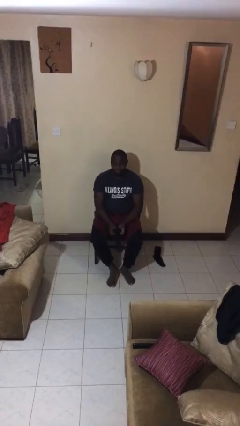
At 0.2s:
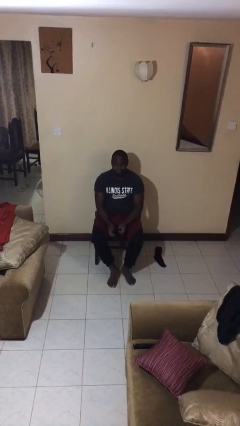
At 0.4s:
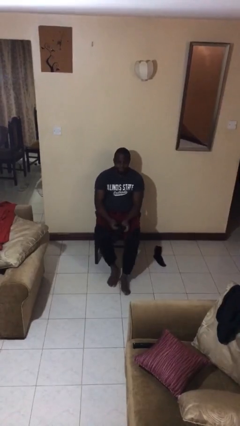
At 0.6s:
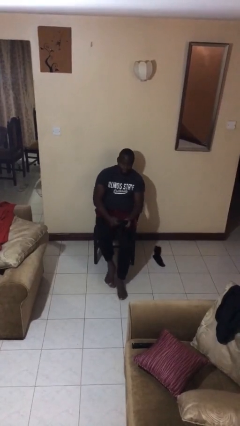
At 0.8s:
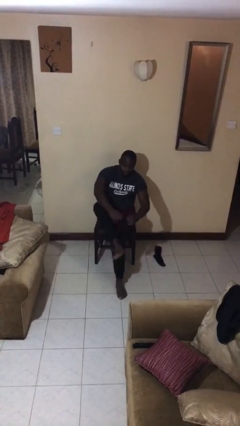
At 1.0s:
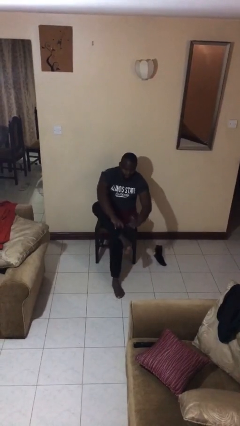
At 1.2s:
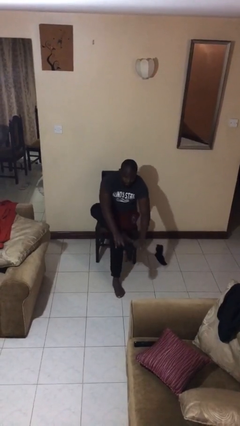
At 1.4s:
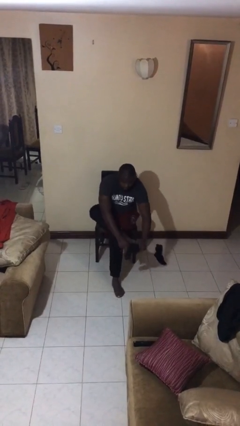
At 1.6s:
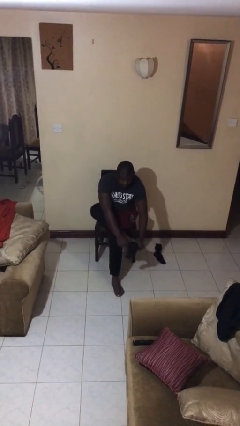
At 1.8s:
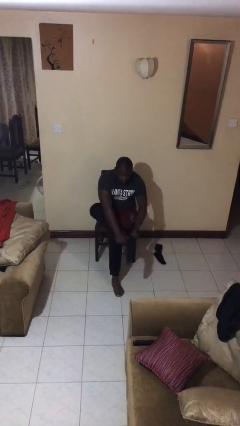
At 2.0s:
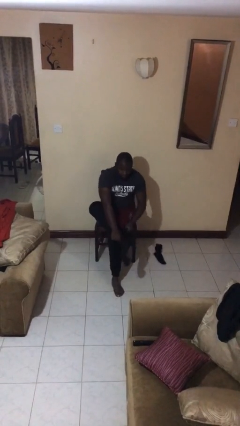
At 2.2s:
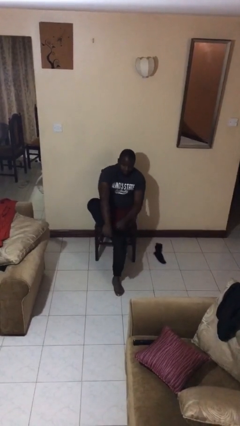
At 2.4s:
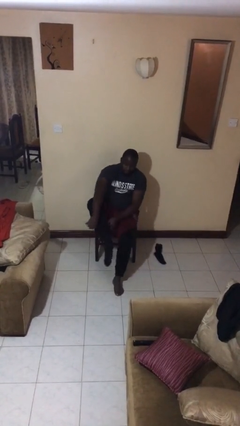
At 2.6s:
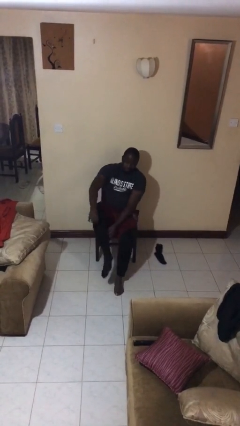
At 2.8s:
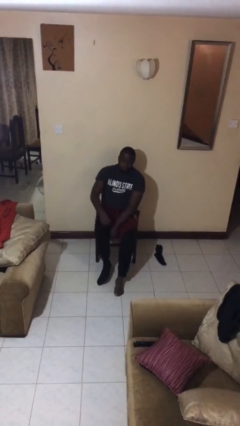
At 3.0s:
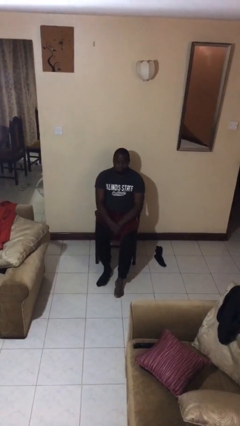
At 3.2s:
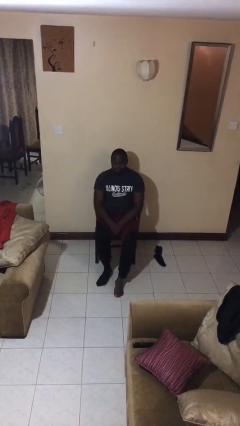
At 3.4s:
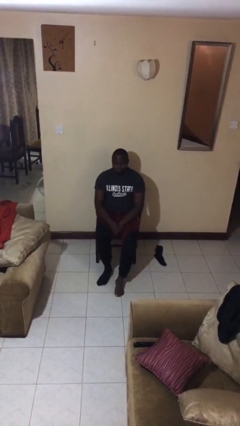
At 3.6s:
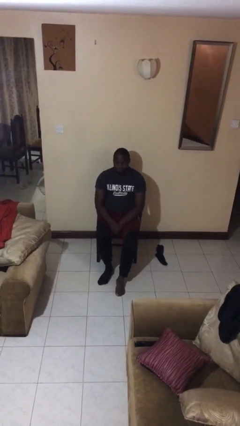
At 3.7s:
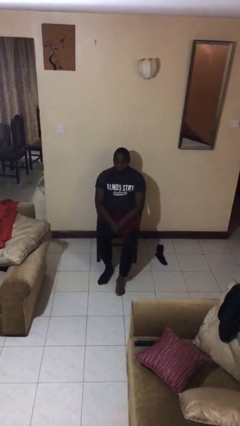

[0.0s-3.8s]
person puts on socks

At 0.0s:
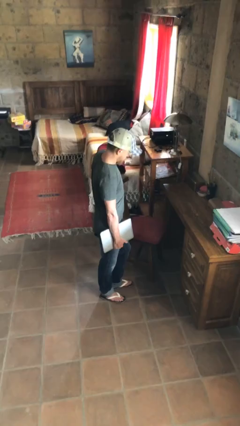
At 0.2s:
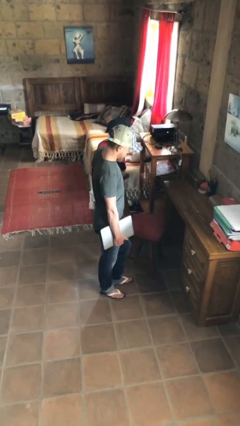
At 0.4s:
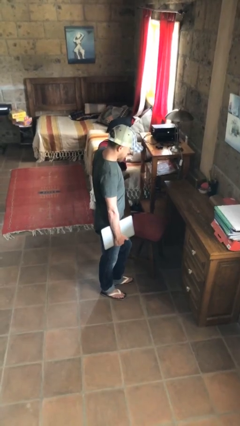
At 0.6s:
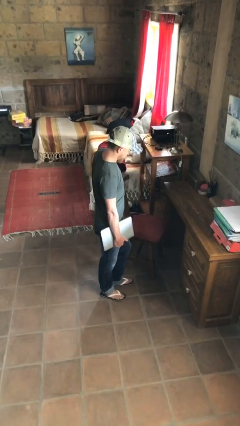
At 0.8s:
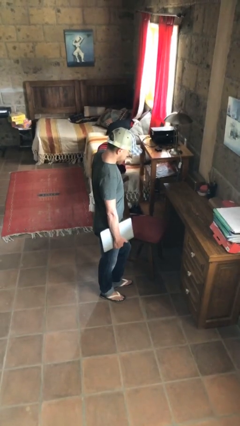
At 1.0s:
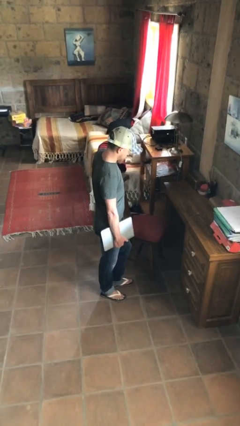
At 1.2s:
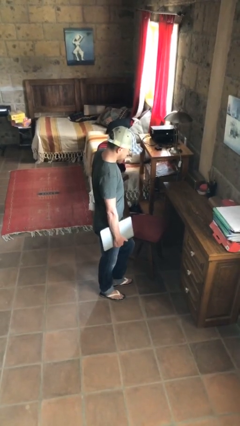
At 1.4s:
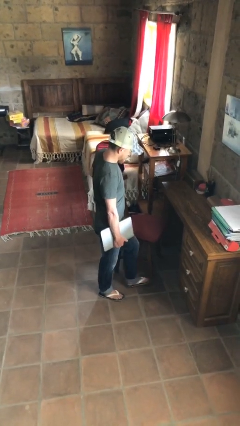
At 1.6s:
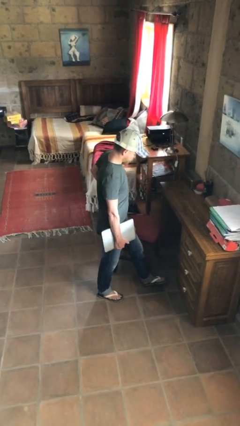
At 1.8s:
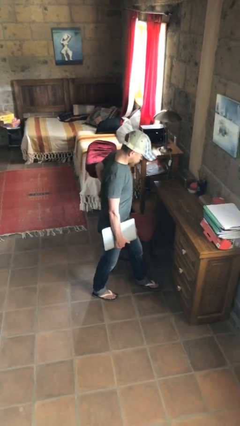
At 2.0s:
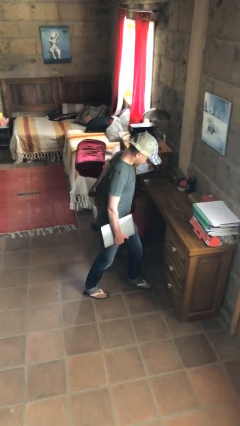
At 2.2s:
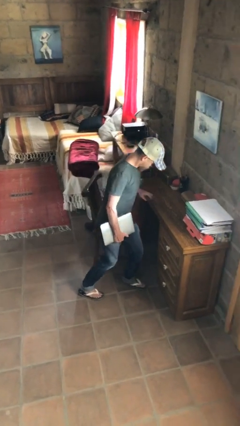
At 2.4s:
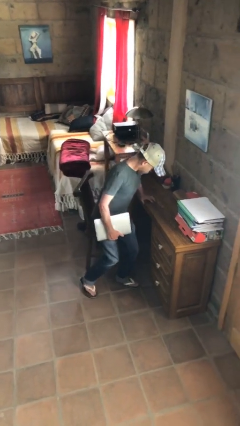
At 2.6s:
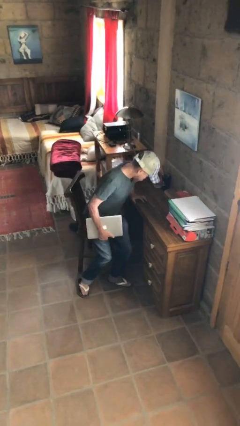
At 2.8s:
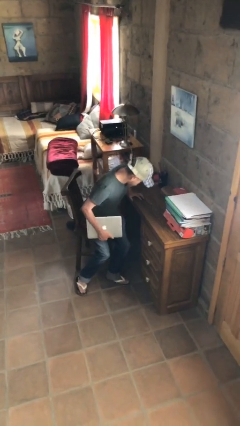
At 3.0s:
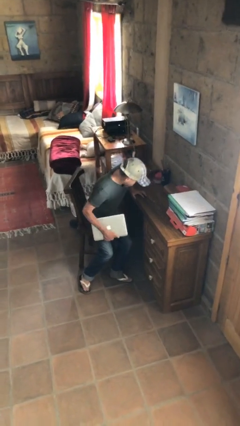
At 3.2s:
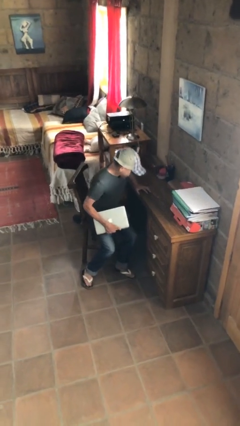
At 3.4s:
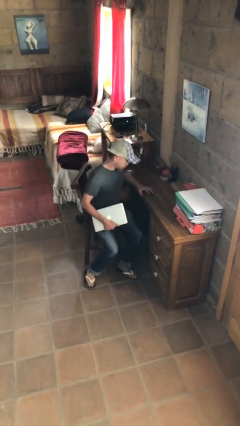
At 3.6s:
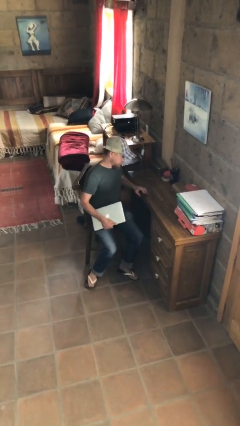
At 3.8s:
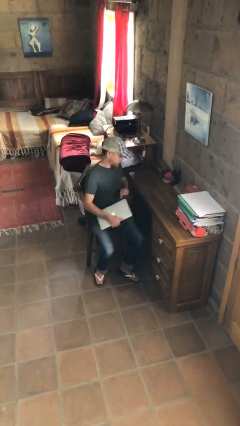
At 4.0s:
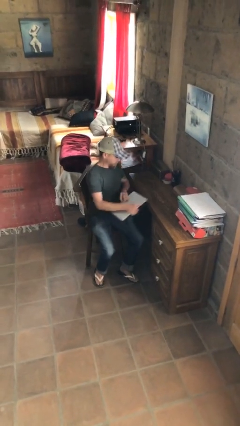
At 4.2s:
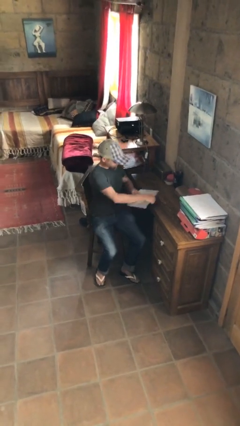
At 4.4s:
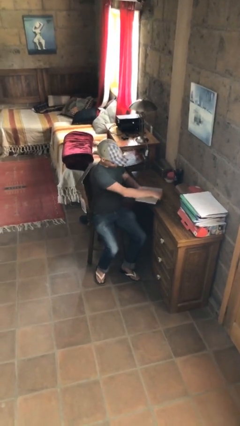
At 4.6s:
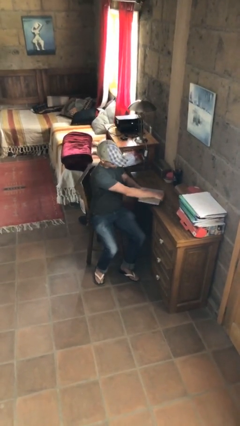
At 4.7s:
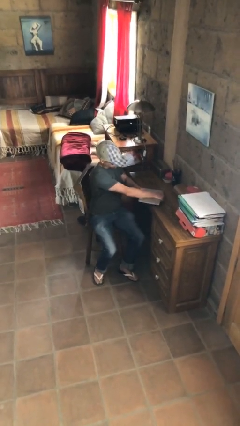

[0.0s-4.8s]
person sits down

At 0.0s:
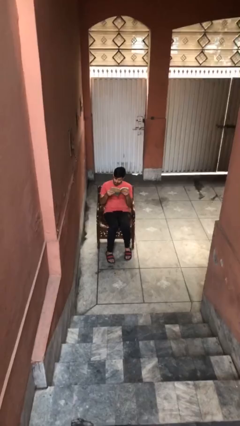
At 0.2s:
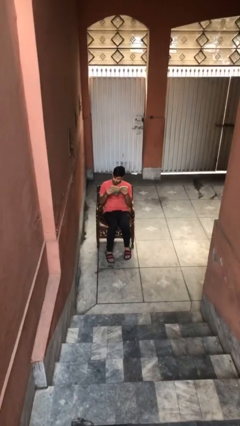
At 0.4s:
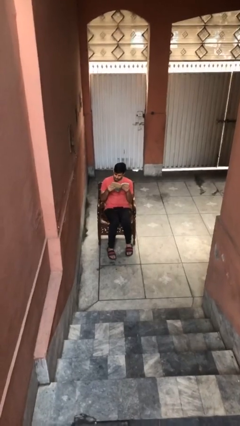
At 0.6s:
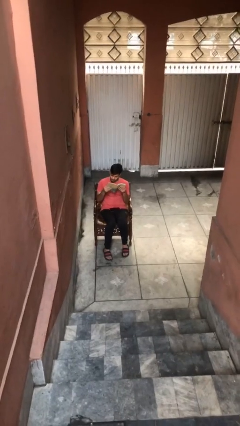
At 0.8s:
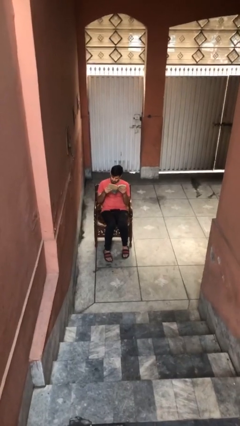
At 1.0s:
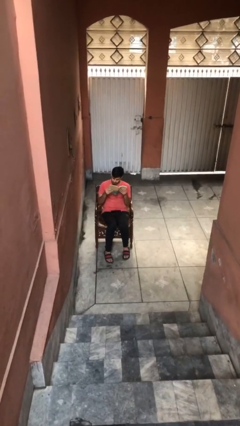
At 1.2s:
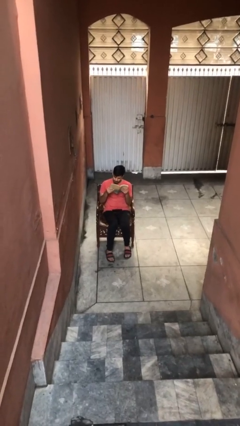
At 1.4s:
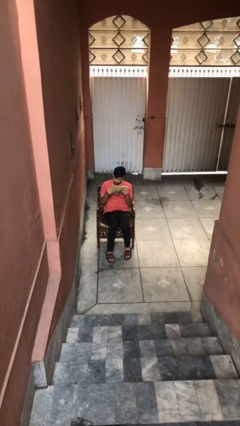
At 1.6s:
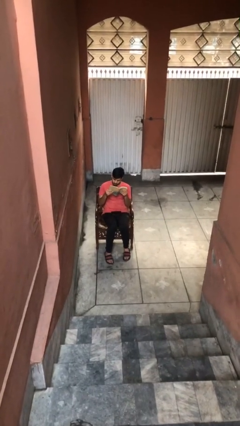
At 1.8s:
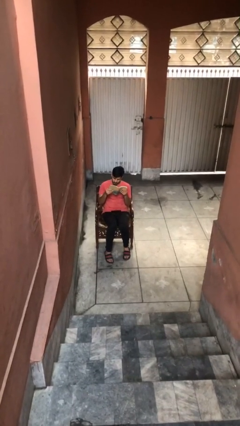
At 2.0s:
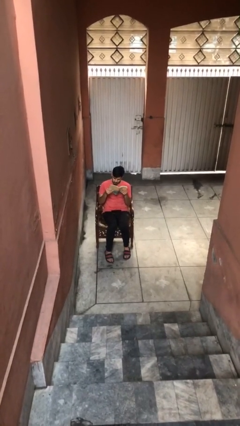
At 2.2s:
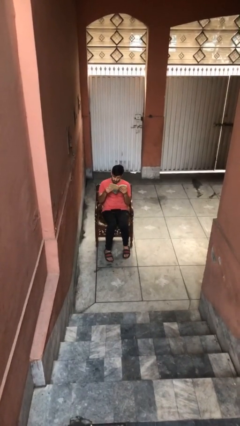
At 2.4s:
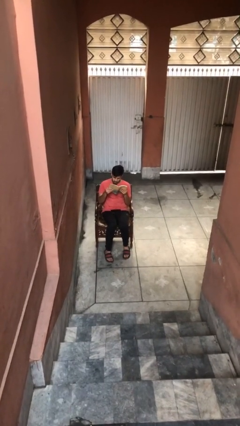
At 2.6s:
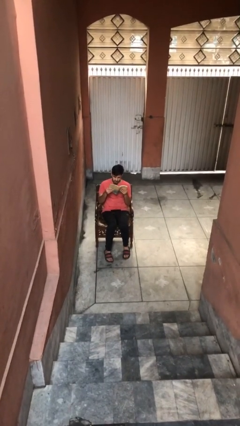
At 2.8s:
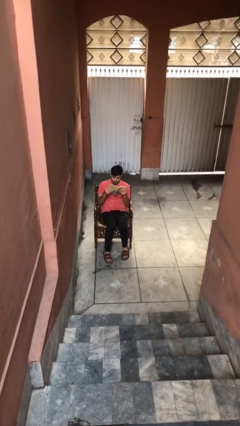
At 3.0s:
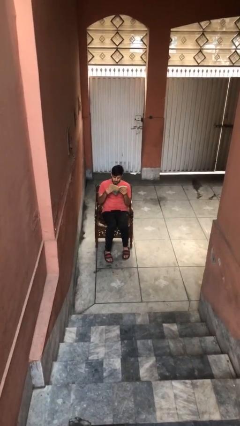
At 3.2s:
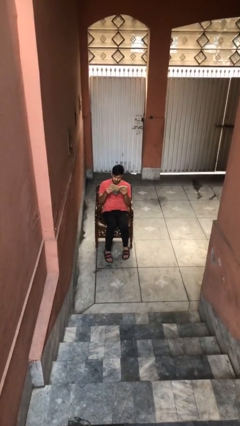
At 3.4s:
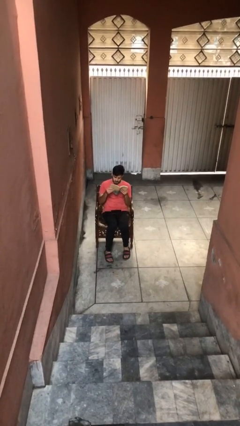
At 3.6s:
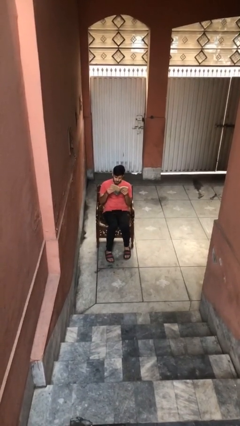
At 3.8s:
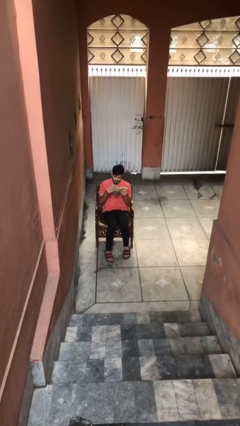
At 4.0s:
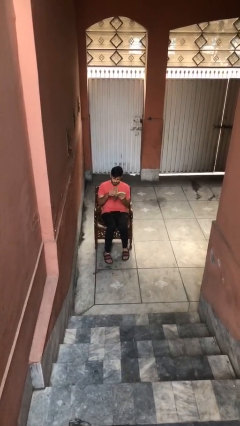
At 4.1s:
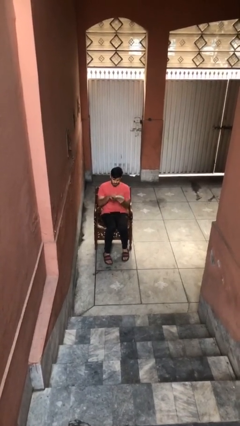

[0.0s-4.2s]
person reads document

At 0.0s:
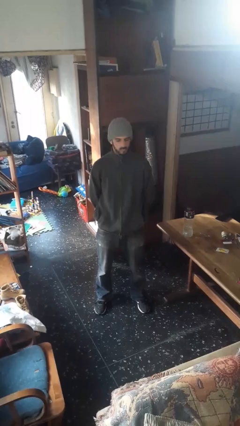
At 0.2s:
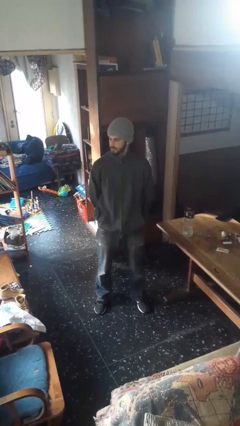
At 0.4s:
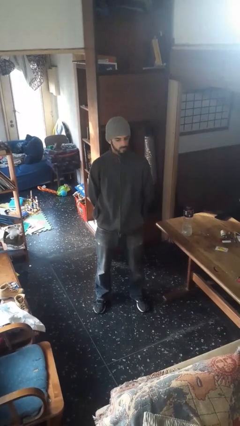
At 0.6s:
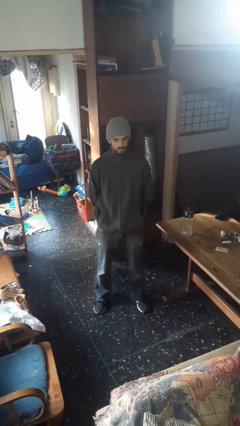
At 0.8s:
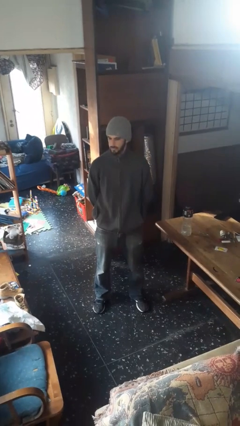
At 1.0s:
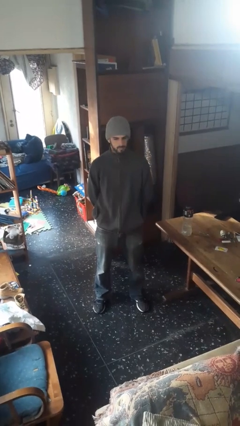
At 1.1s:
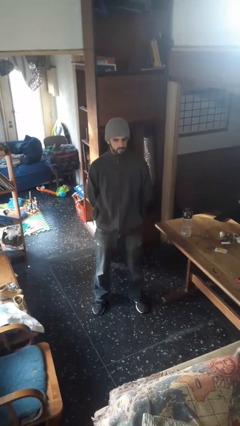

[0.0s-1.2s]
person shakes head

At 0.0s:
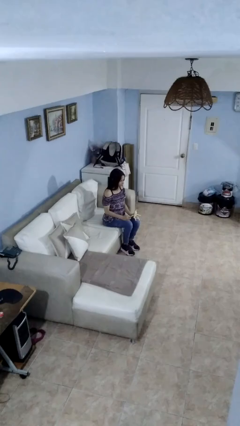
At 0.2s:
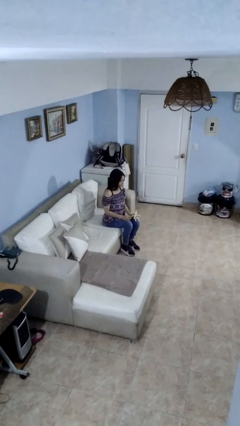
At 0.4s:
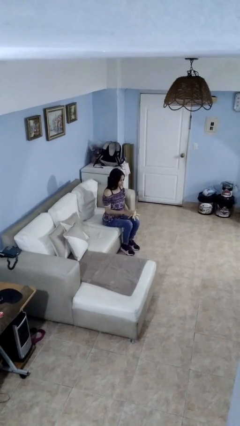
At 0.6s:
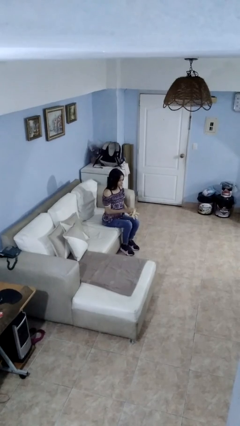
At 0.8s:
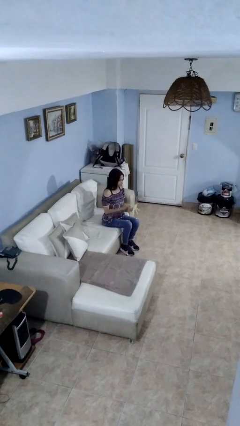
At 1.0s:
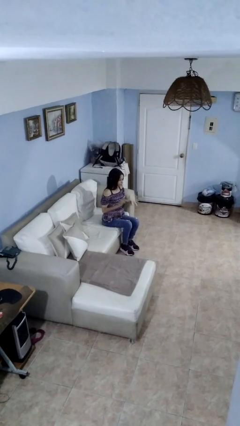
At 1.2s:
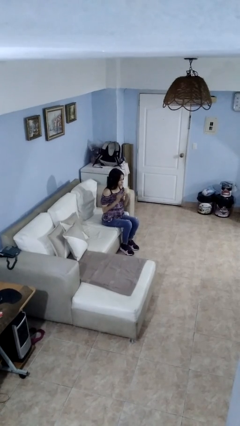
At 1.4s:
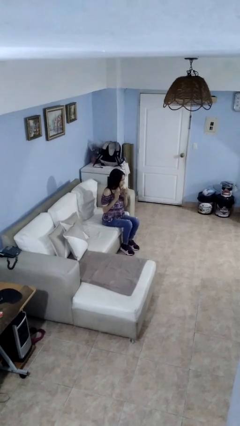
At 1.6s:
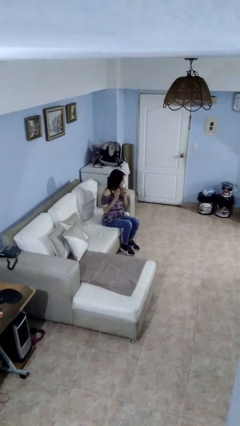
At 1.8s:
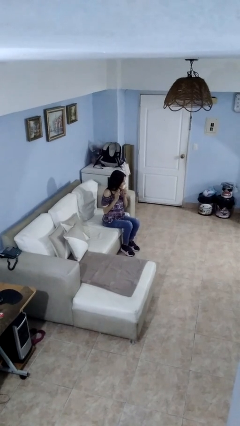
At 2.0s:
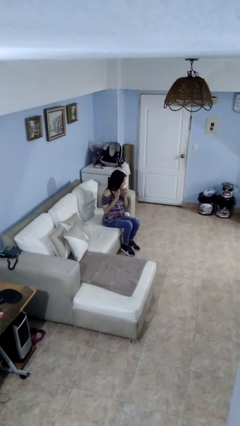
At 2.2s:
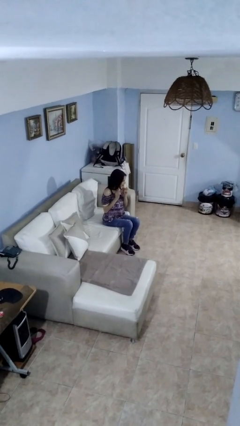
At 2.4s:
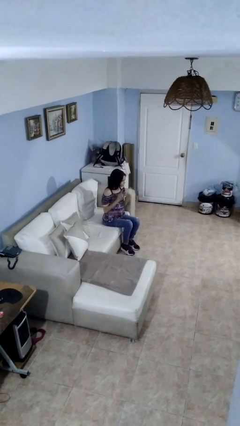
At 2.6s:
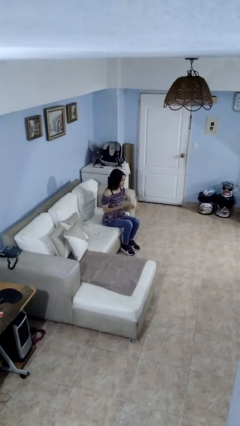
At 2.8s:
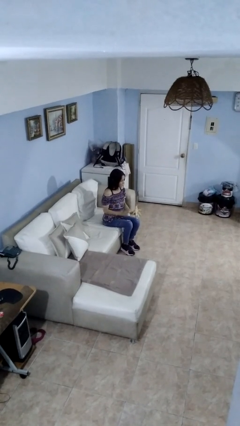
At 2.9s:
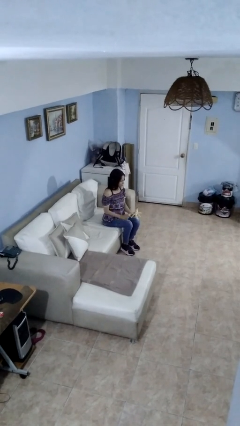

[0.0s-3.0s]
person eats banana

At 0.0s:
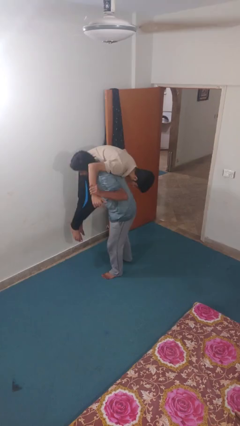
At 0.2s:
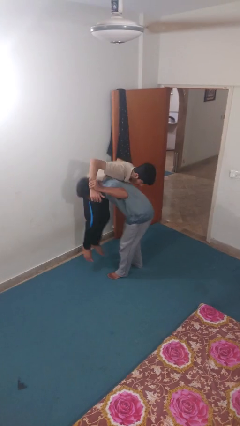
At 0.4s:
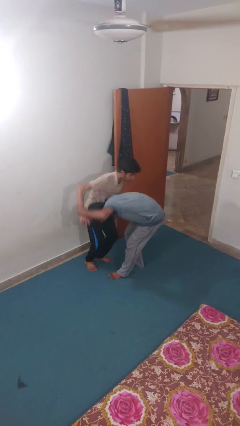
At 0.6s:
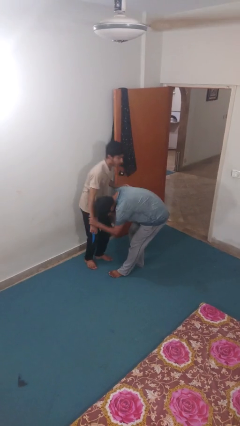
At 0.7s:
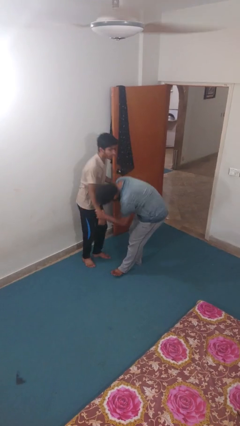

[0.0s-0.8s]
person puts down person
